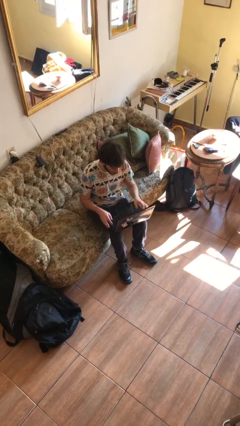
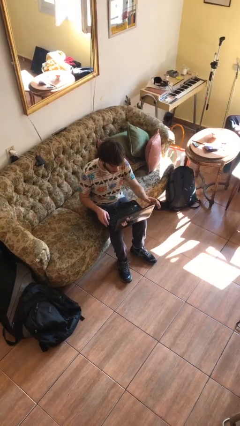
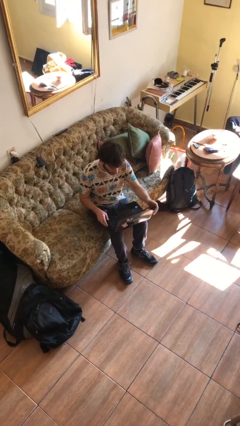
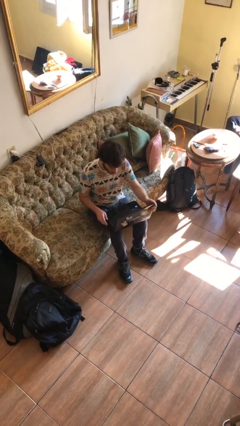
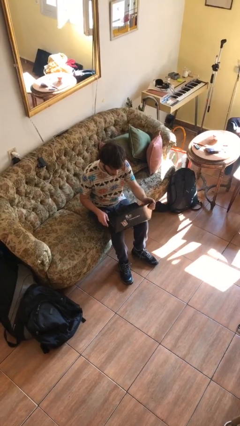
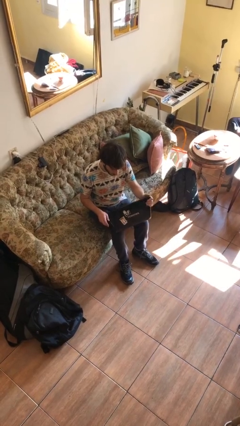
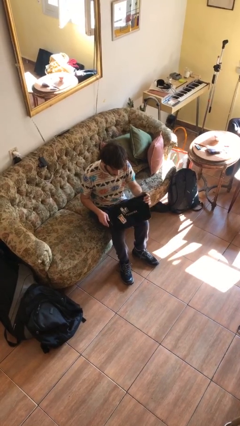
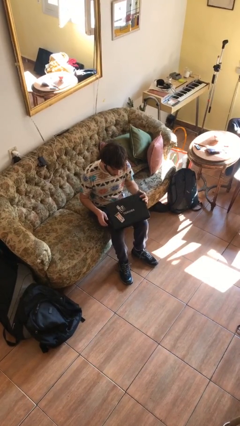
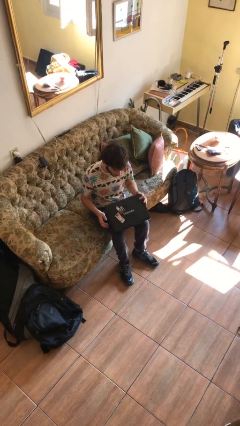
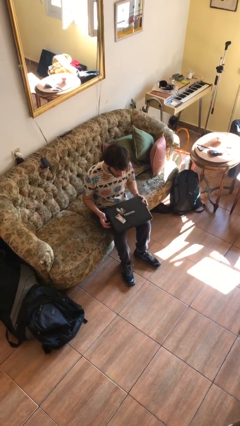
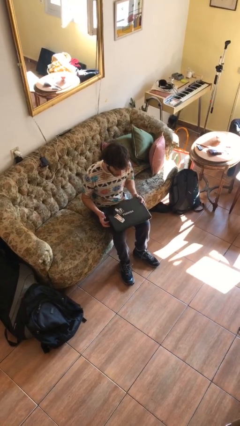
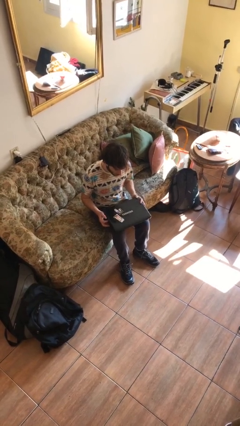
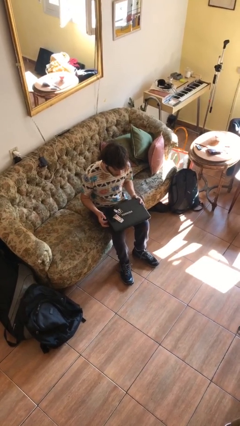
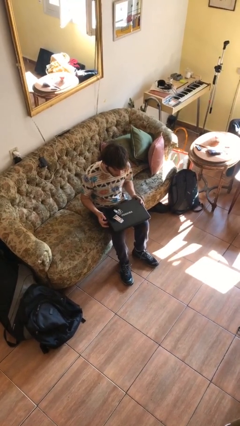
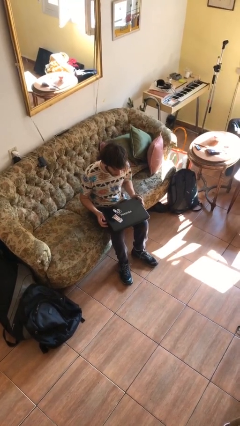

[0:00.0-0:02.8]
person closes laptop

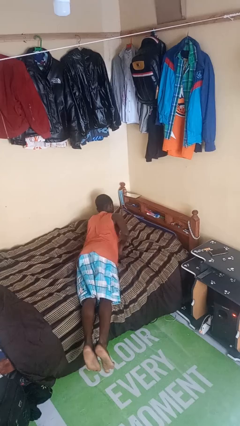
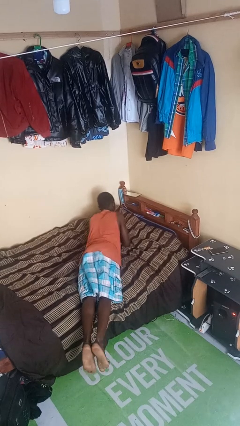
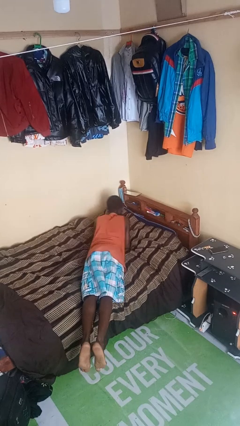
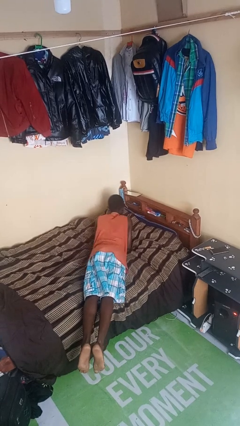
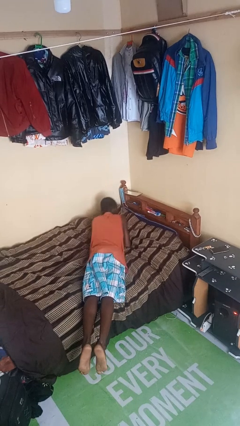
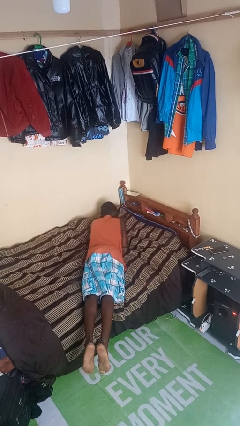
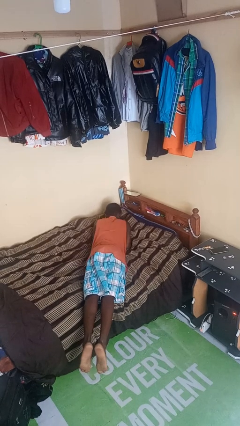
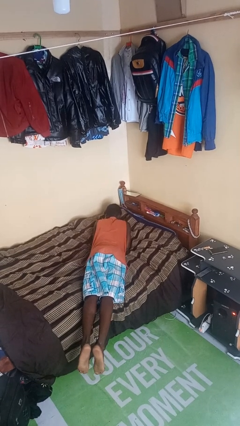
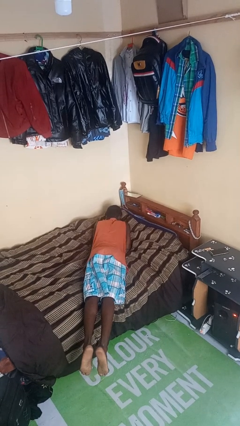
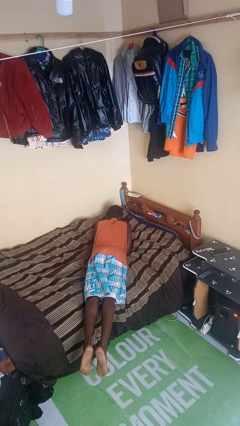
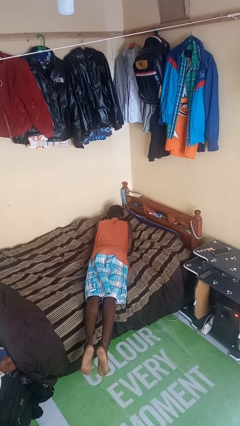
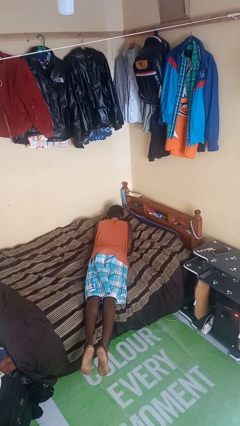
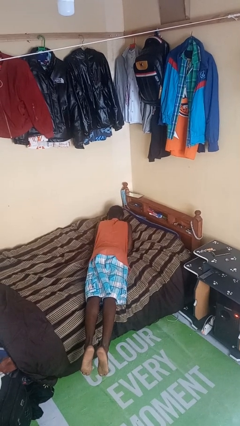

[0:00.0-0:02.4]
person lies down on bed

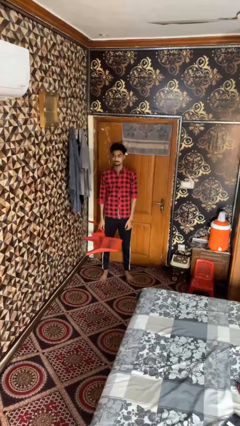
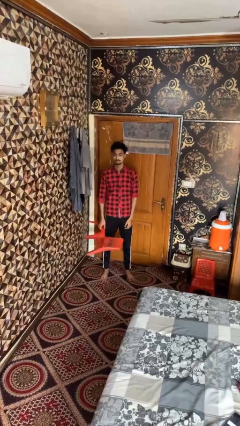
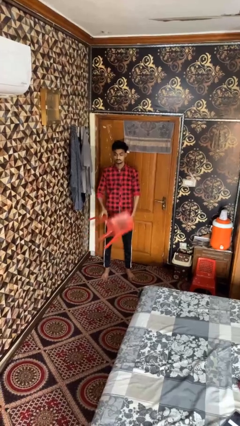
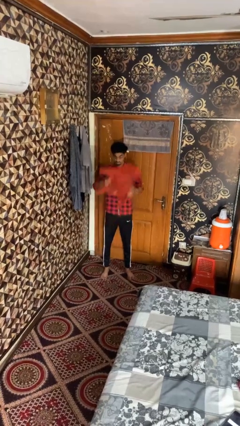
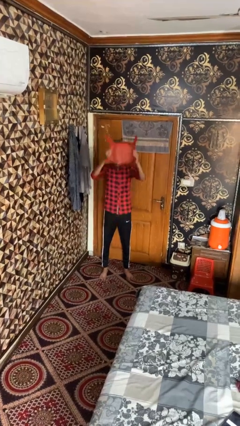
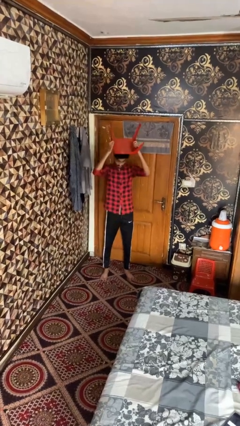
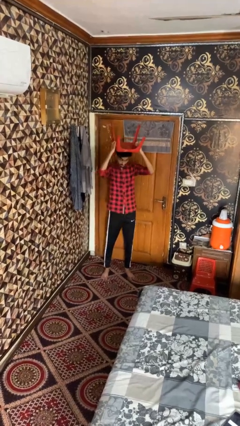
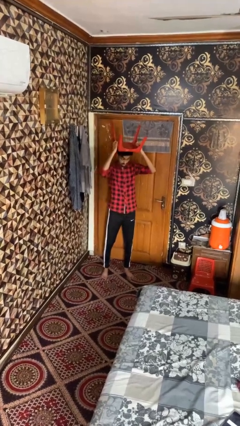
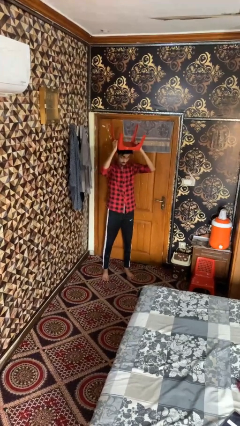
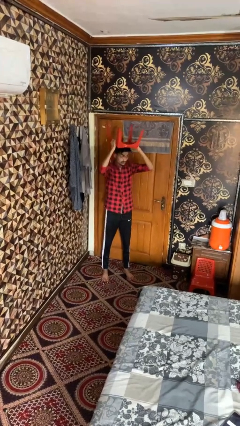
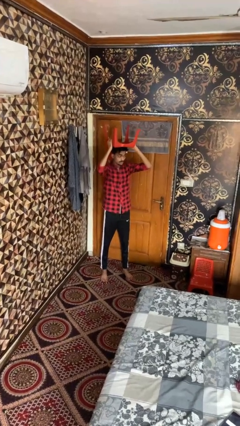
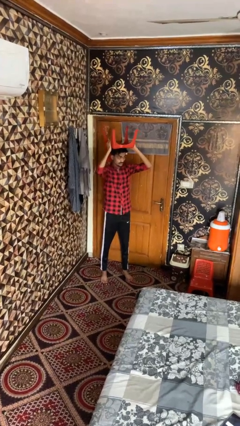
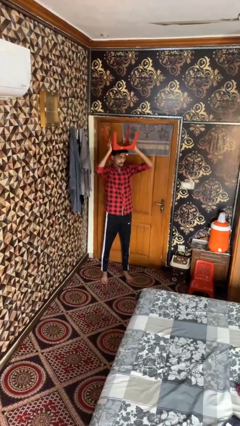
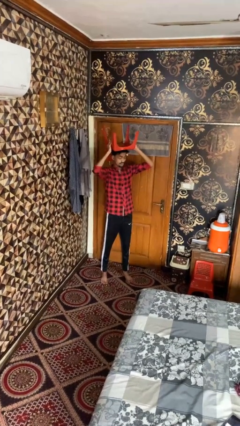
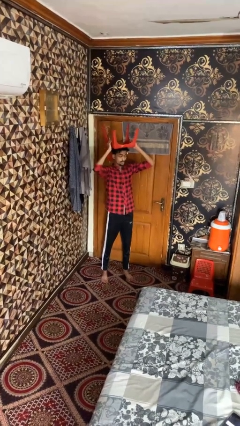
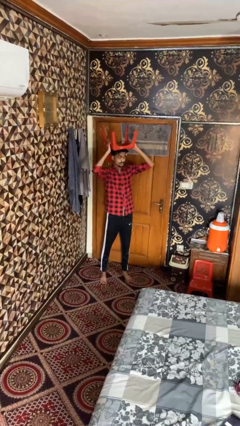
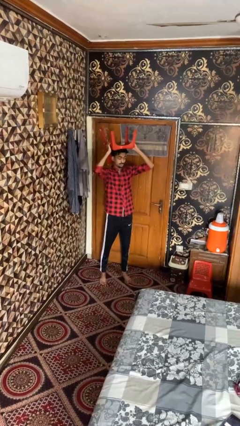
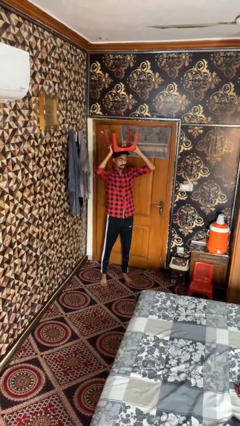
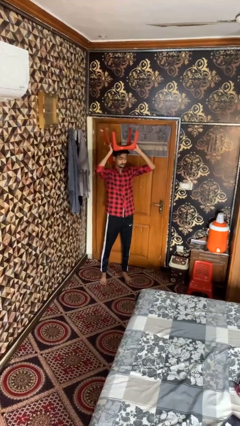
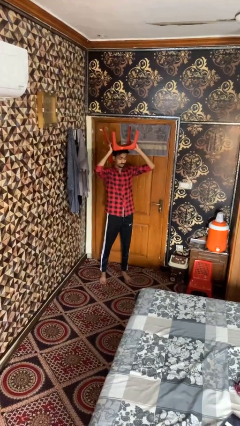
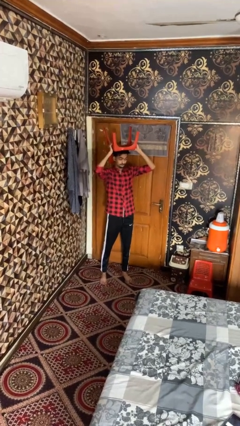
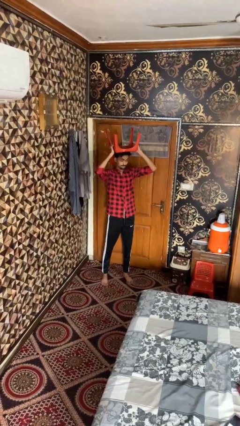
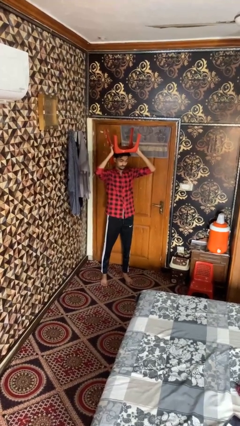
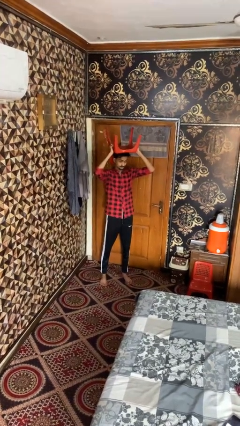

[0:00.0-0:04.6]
person holds object above head

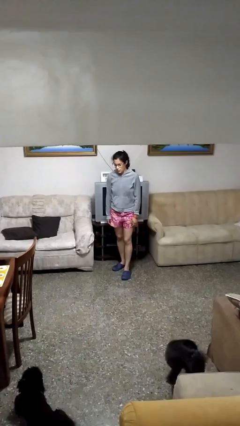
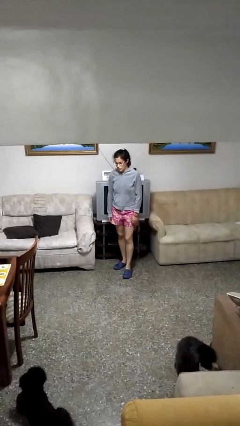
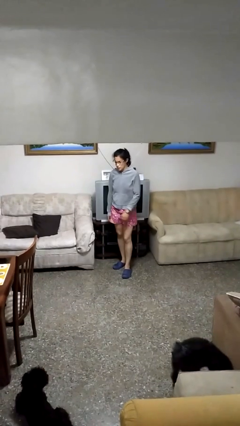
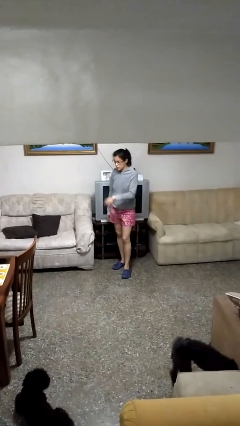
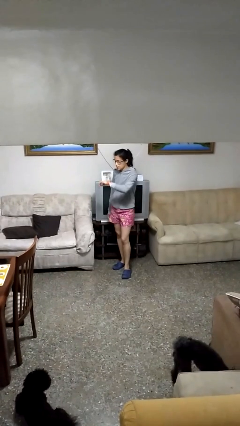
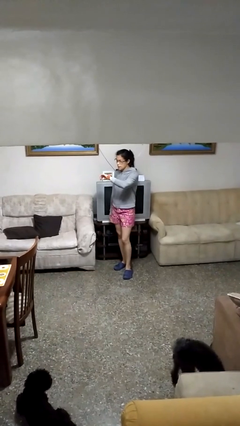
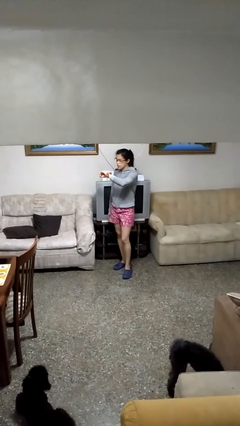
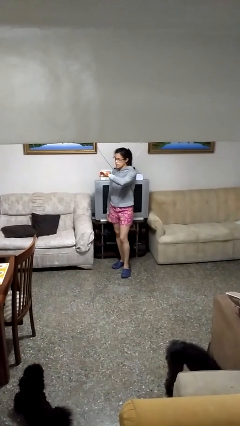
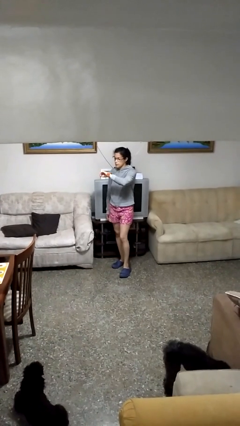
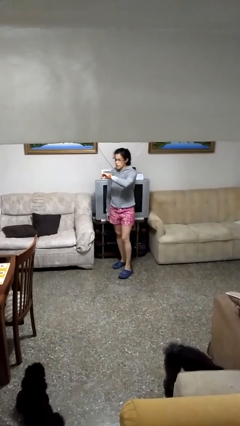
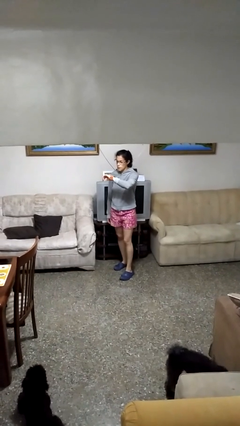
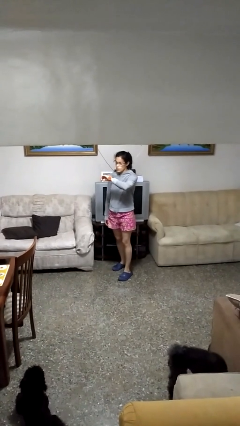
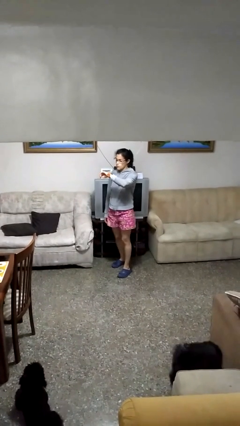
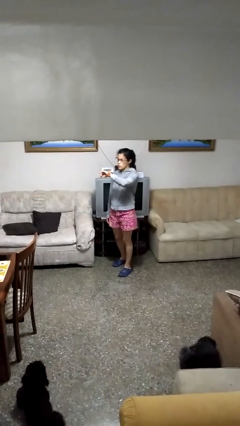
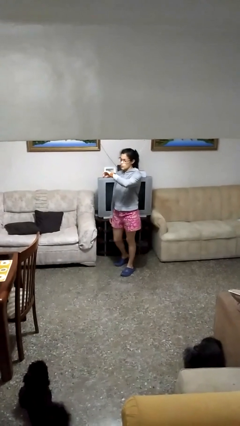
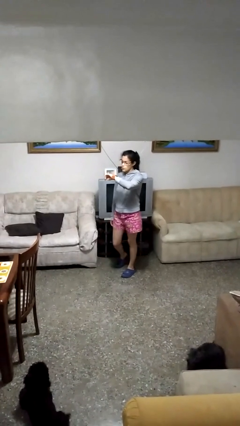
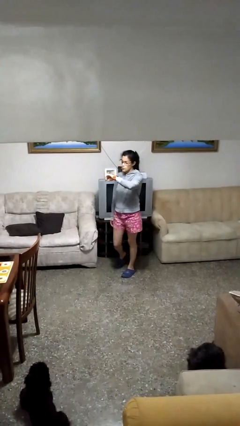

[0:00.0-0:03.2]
person looks at wristwatch

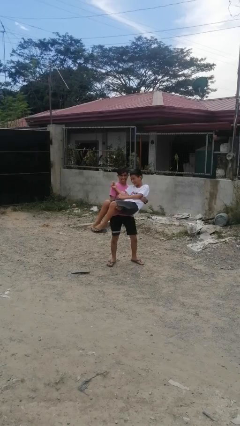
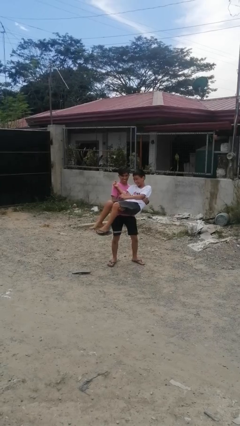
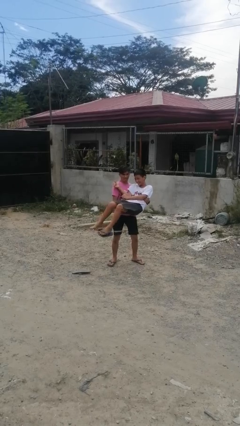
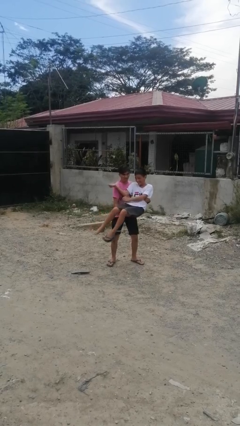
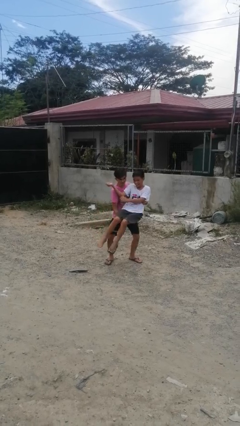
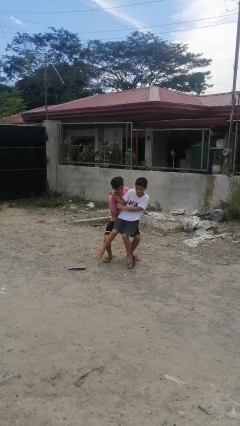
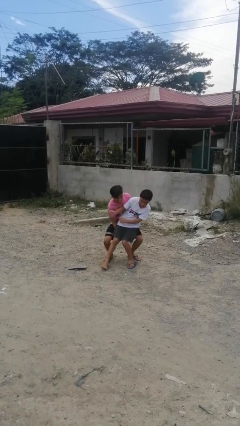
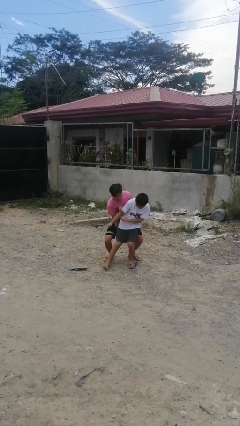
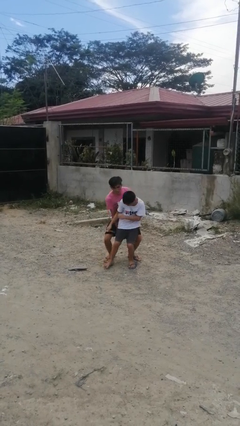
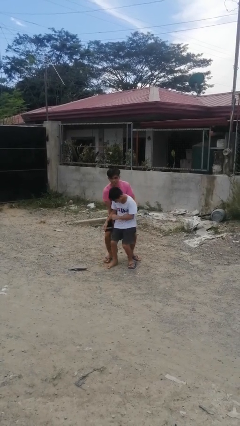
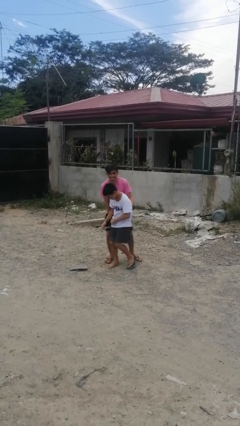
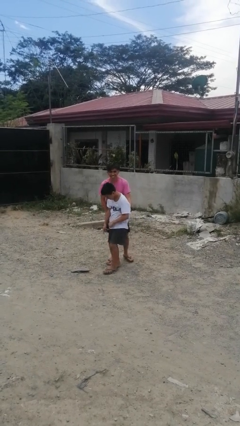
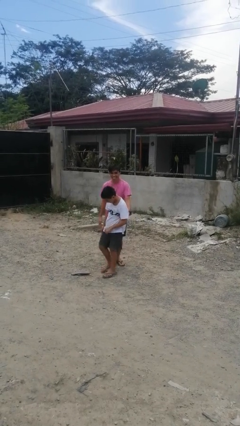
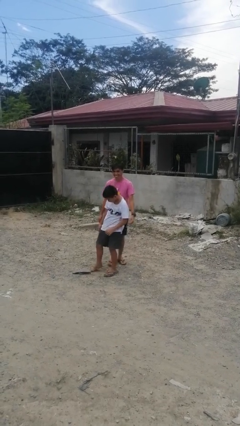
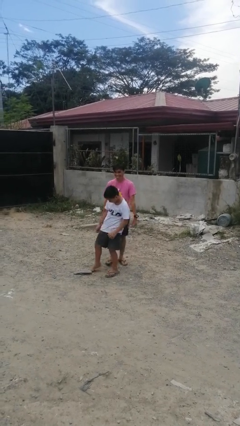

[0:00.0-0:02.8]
person puts down person

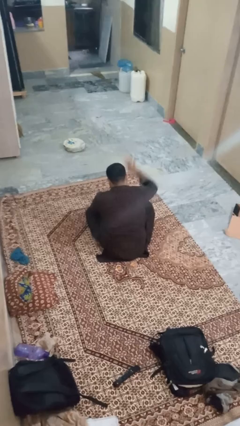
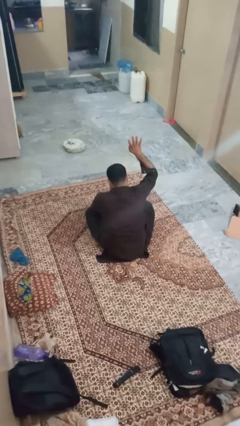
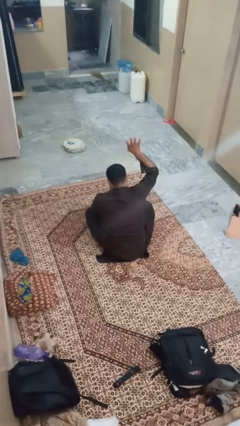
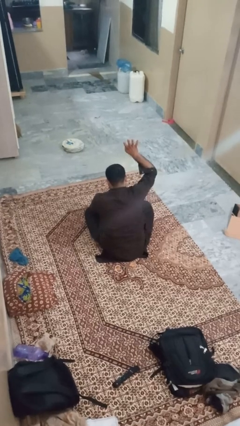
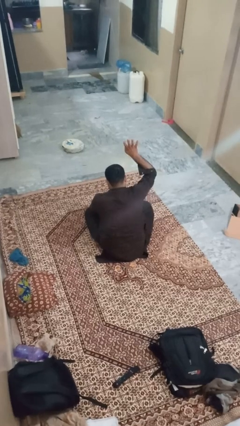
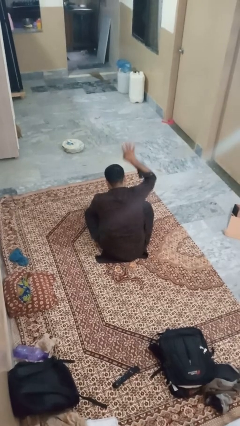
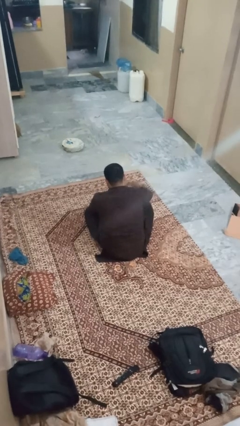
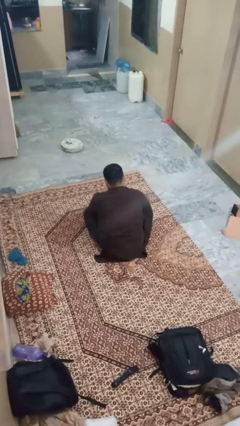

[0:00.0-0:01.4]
person gestures number four
